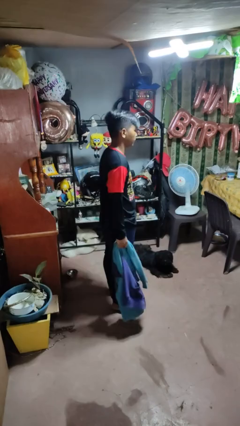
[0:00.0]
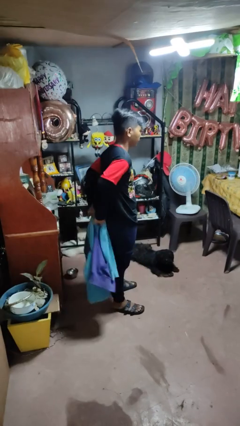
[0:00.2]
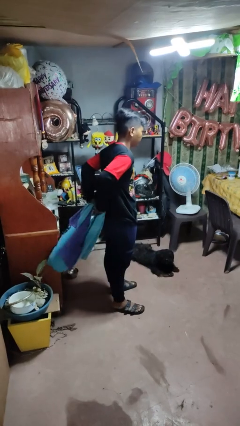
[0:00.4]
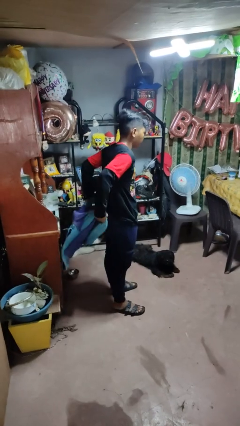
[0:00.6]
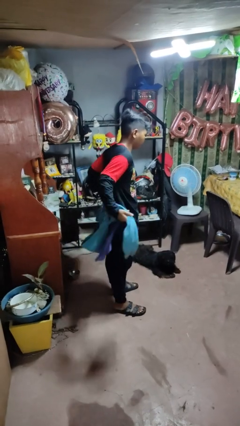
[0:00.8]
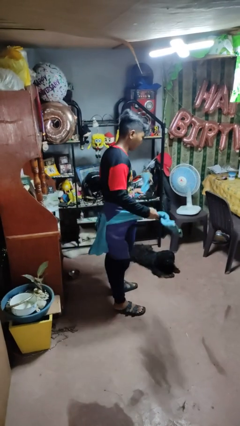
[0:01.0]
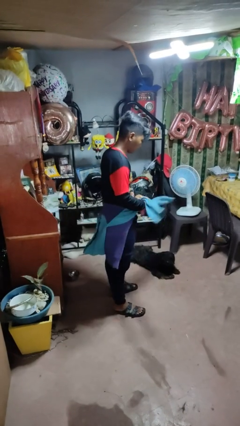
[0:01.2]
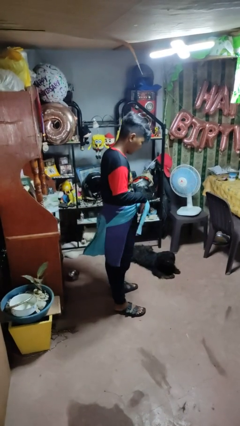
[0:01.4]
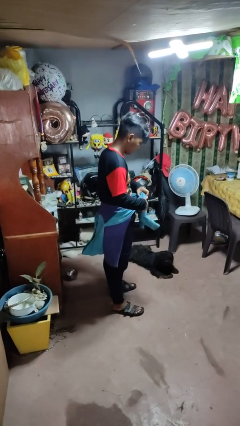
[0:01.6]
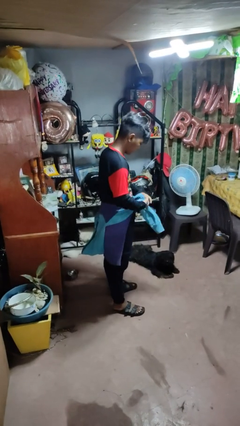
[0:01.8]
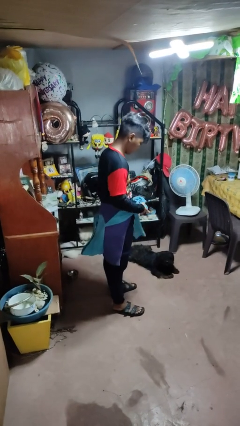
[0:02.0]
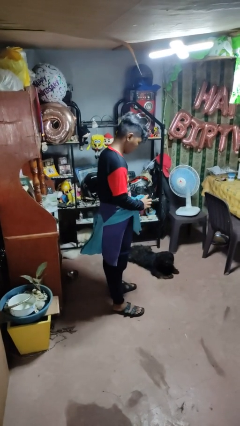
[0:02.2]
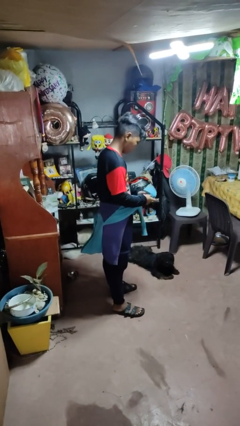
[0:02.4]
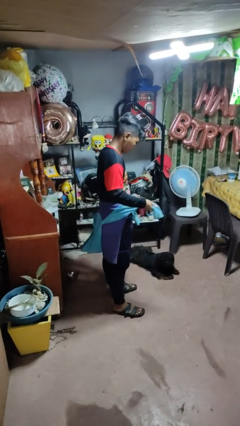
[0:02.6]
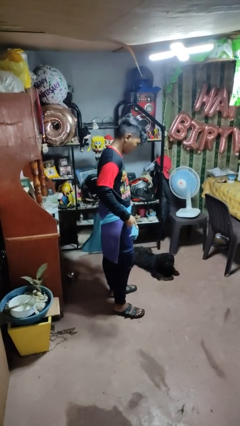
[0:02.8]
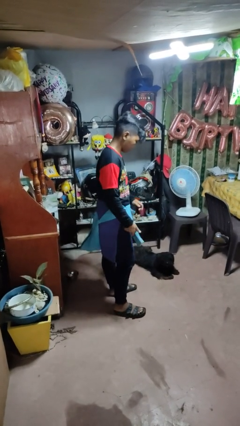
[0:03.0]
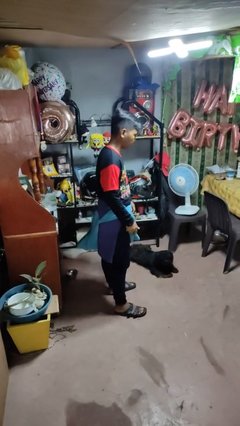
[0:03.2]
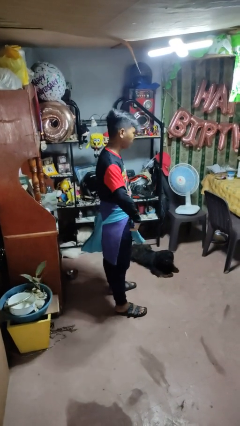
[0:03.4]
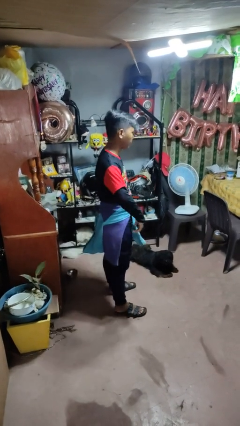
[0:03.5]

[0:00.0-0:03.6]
person ties jacket around waist

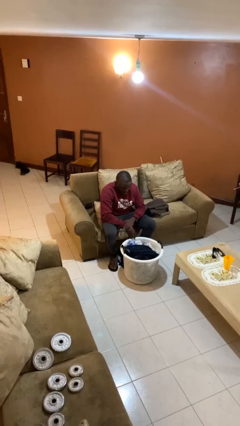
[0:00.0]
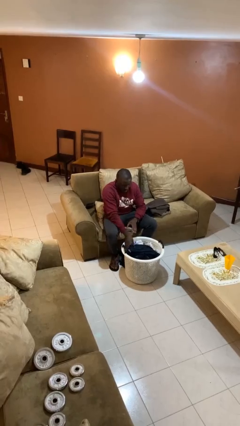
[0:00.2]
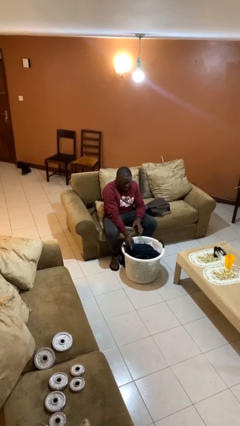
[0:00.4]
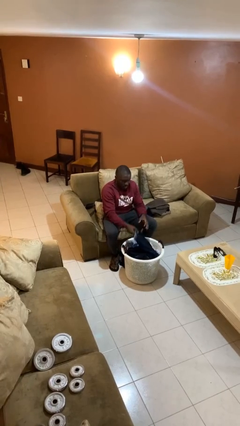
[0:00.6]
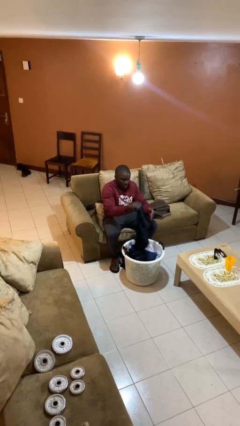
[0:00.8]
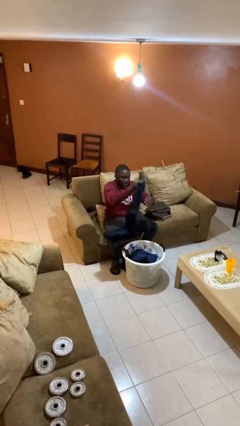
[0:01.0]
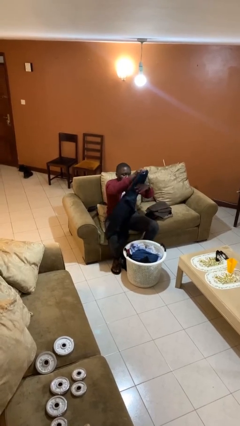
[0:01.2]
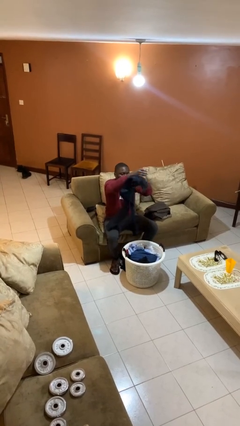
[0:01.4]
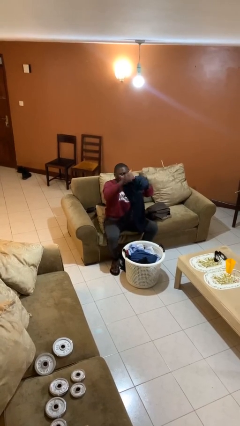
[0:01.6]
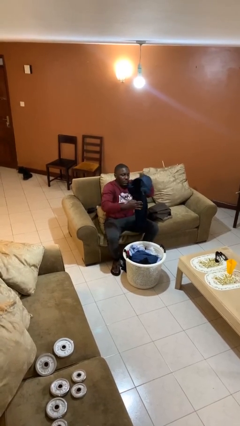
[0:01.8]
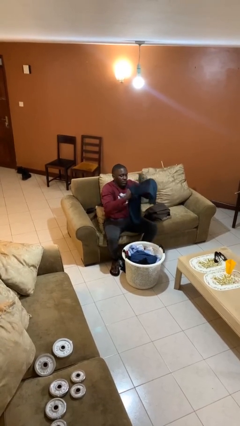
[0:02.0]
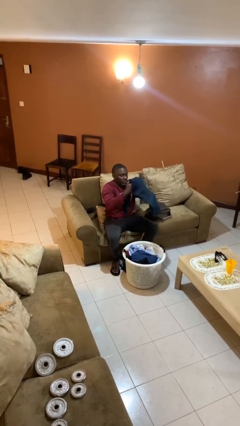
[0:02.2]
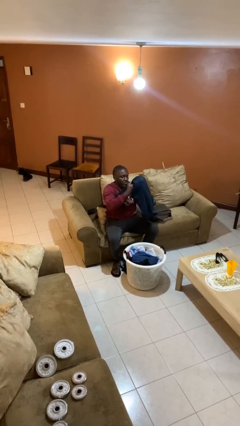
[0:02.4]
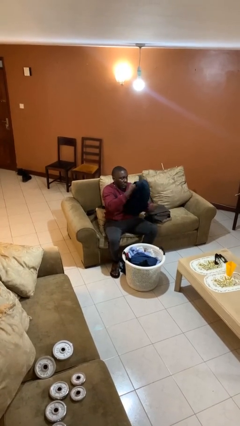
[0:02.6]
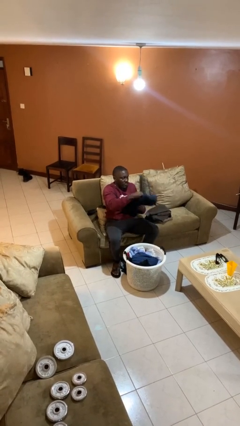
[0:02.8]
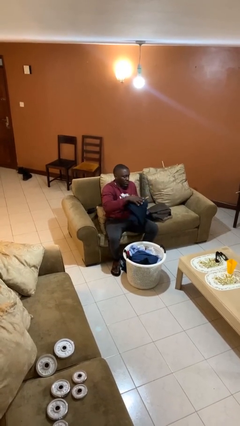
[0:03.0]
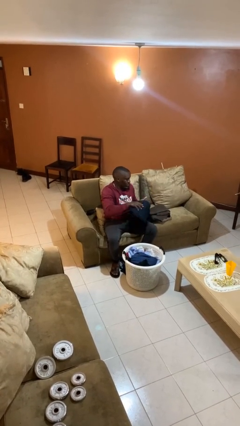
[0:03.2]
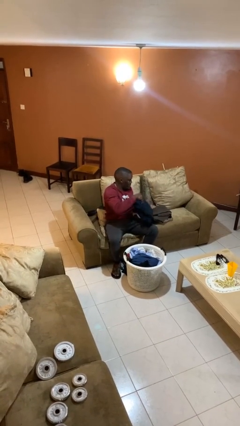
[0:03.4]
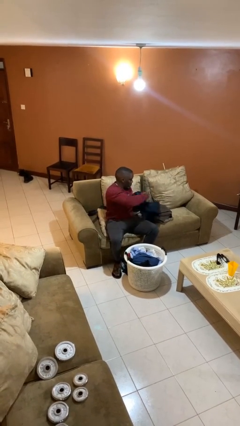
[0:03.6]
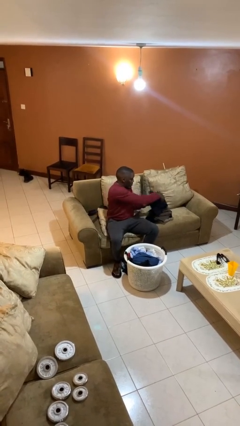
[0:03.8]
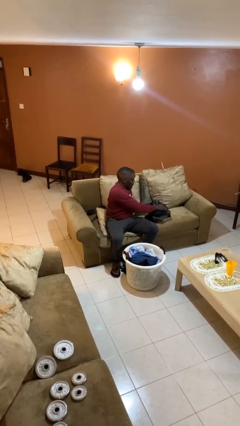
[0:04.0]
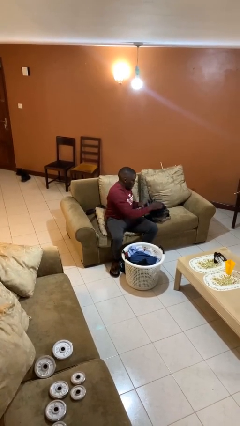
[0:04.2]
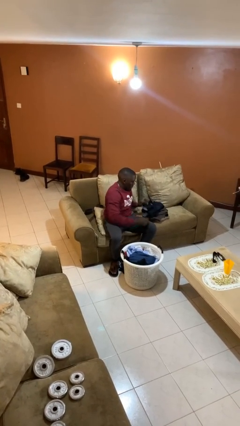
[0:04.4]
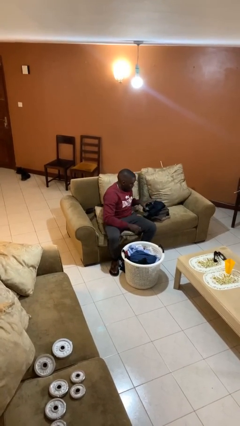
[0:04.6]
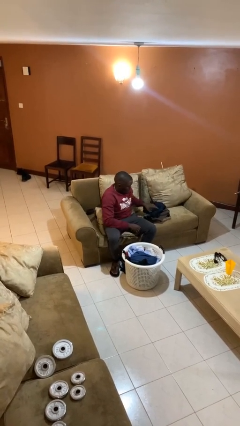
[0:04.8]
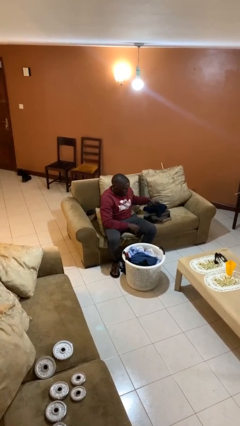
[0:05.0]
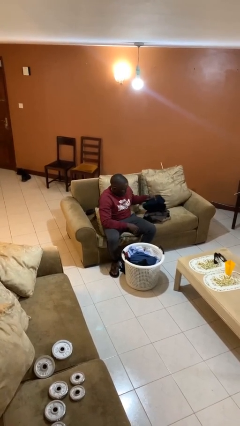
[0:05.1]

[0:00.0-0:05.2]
person folds pants

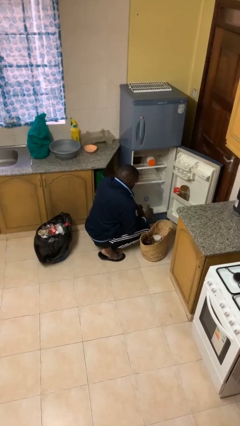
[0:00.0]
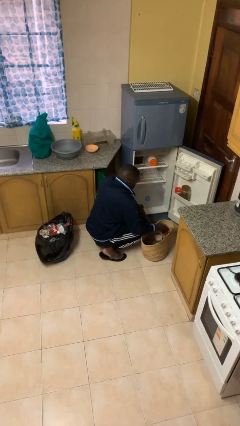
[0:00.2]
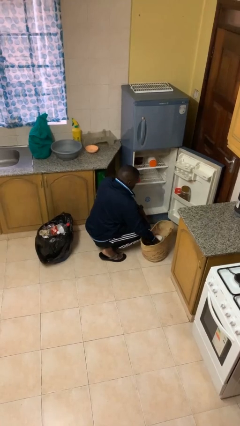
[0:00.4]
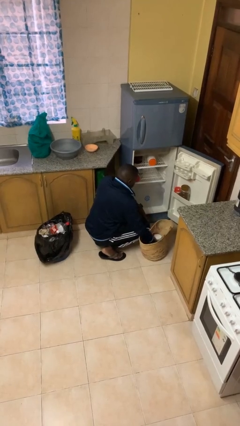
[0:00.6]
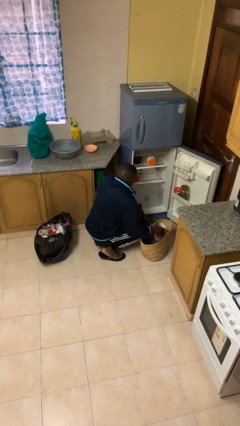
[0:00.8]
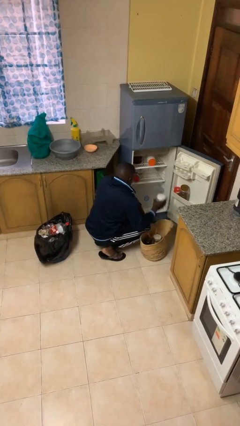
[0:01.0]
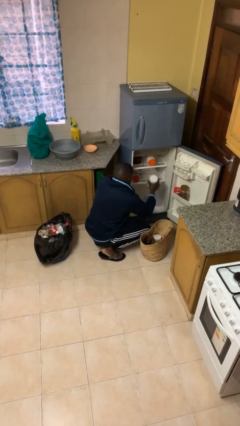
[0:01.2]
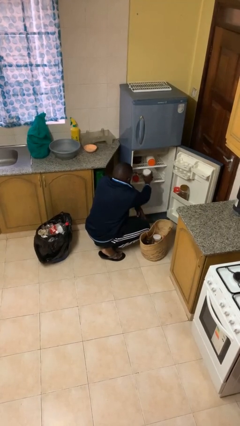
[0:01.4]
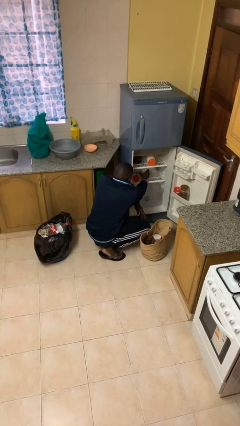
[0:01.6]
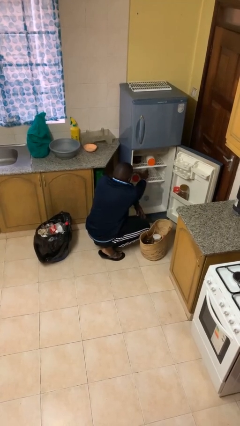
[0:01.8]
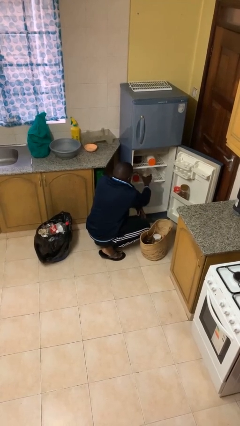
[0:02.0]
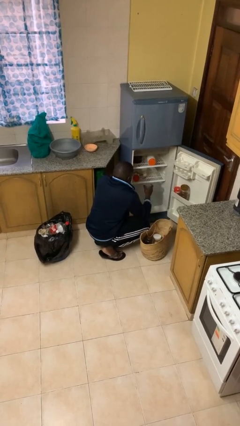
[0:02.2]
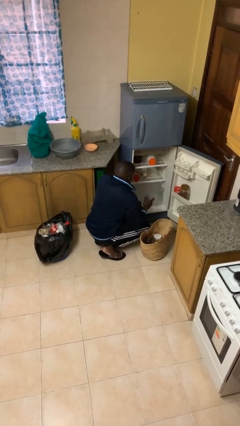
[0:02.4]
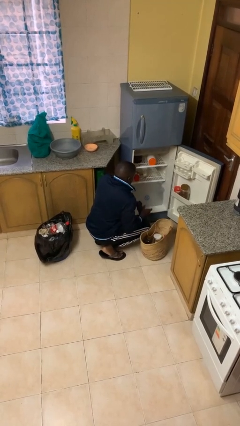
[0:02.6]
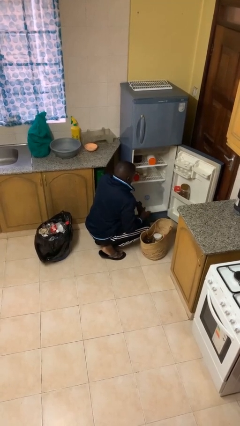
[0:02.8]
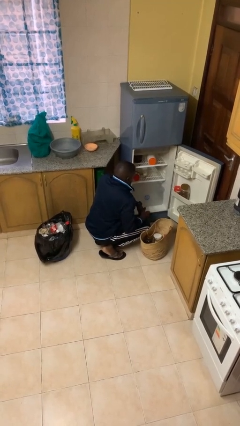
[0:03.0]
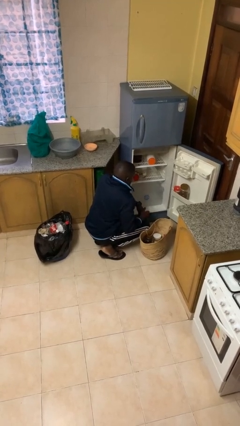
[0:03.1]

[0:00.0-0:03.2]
person loads groceries into refrigerator

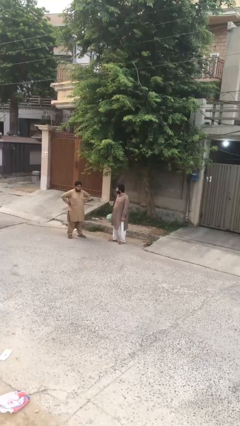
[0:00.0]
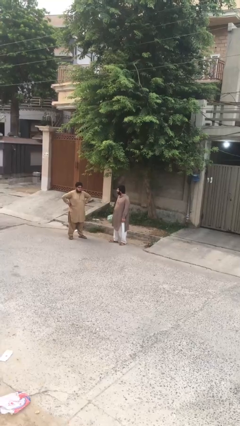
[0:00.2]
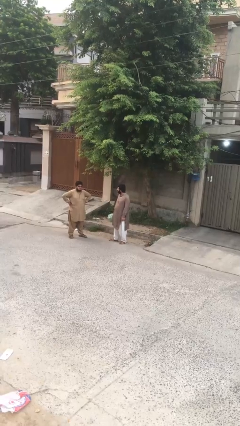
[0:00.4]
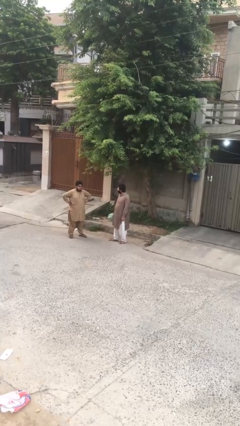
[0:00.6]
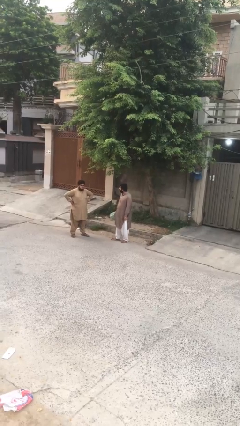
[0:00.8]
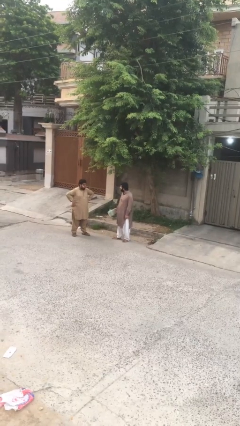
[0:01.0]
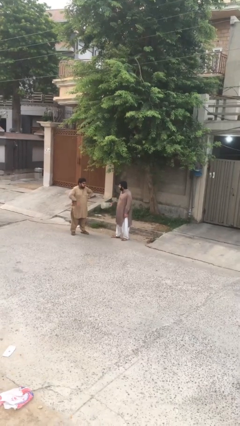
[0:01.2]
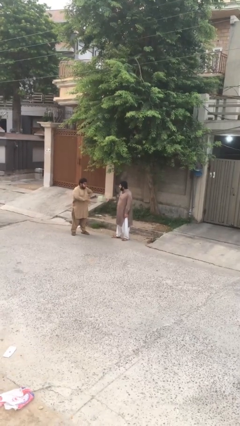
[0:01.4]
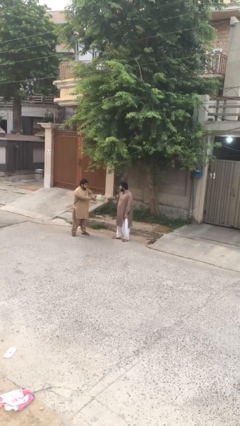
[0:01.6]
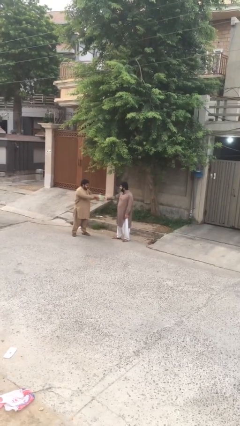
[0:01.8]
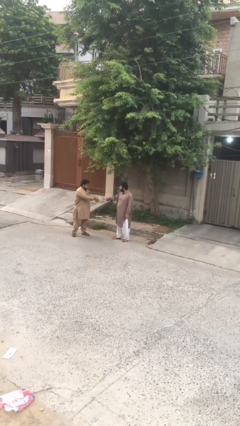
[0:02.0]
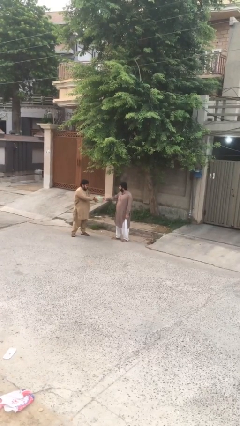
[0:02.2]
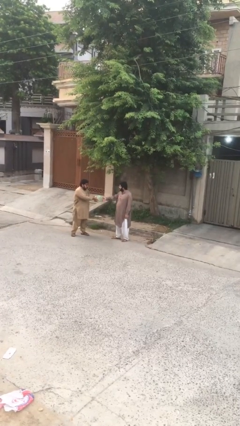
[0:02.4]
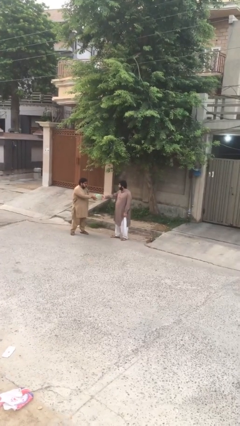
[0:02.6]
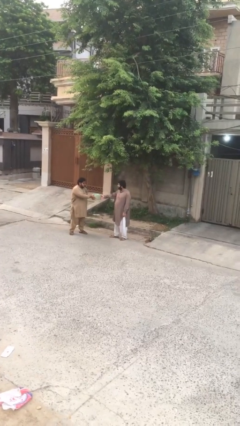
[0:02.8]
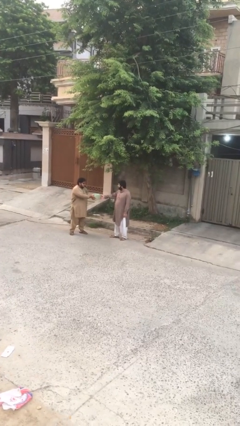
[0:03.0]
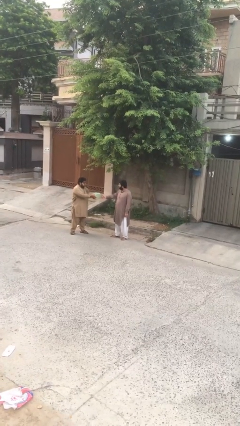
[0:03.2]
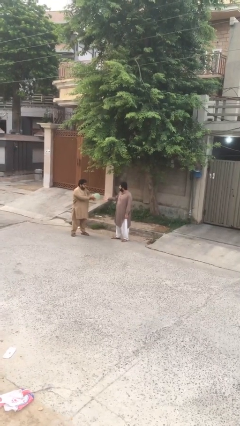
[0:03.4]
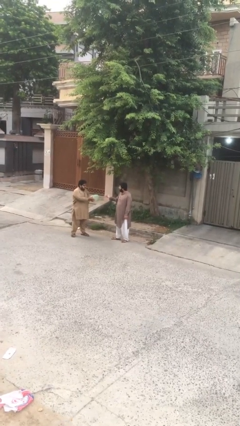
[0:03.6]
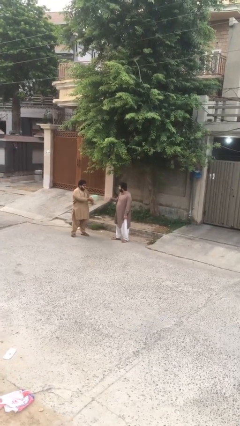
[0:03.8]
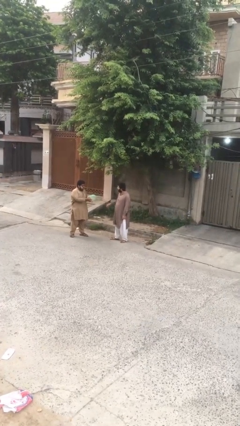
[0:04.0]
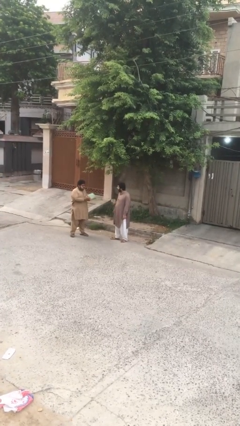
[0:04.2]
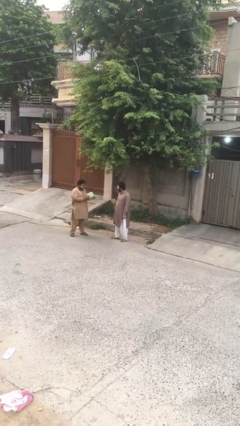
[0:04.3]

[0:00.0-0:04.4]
person transfers object to person

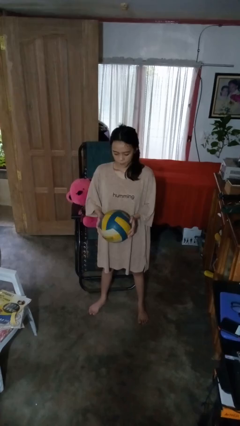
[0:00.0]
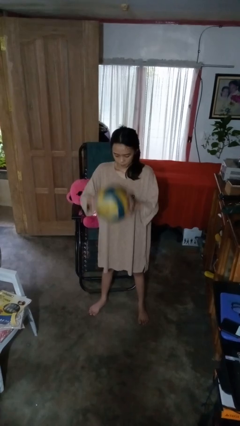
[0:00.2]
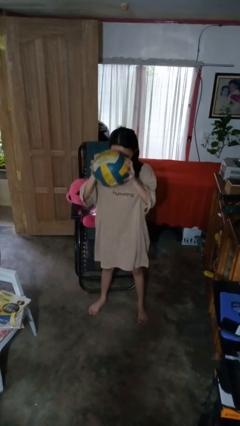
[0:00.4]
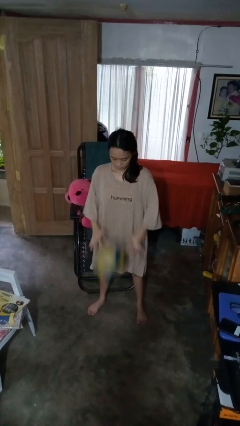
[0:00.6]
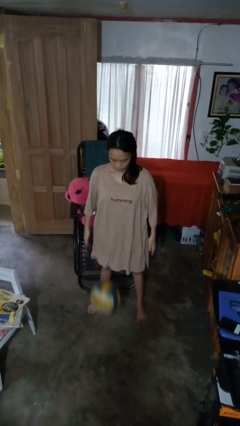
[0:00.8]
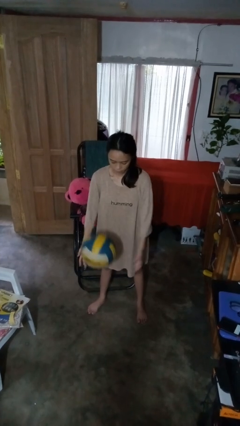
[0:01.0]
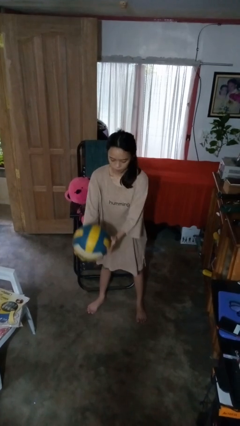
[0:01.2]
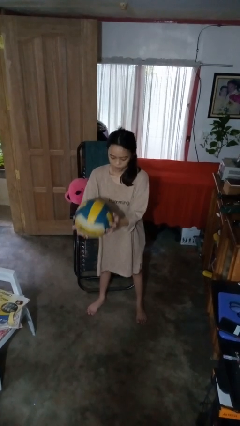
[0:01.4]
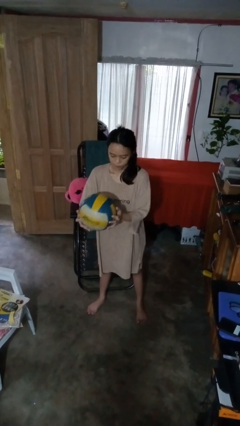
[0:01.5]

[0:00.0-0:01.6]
person bounces ball on floor
